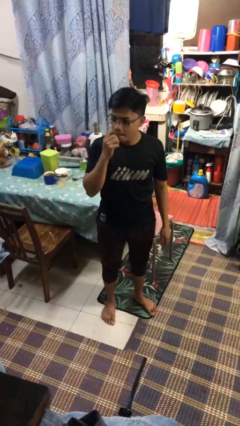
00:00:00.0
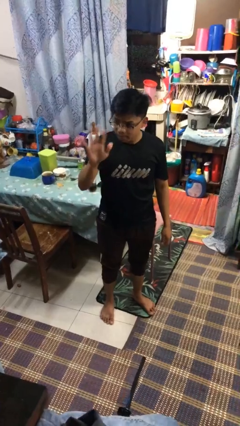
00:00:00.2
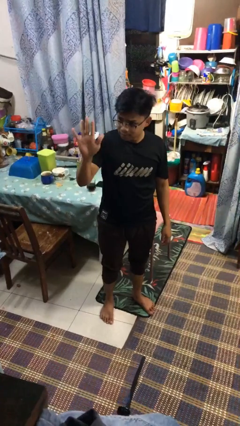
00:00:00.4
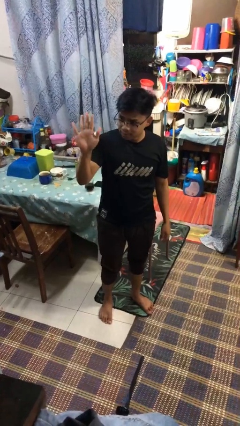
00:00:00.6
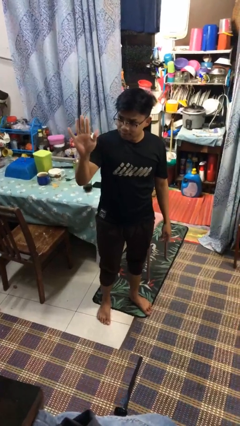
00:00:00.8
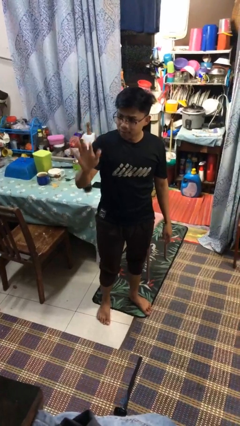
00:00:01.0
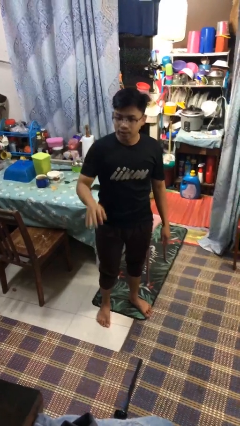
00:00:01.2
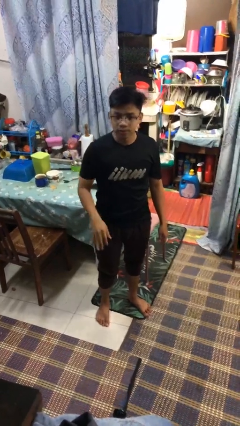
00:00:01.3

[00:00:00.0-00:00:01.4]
person gestures stop

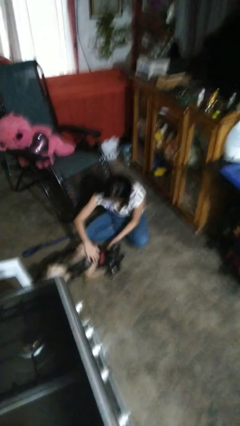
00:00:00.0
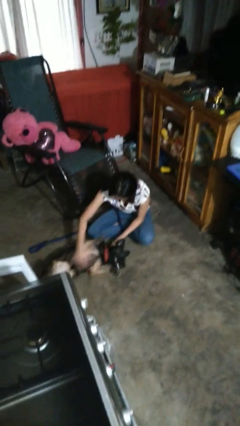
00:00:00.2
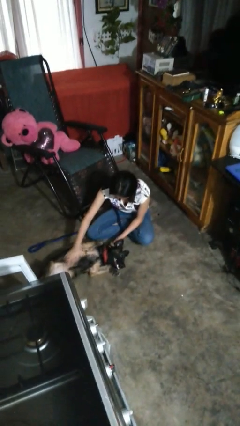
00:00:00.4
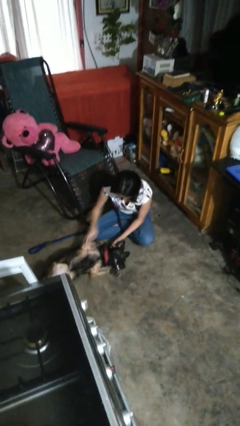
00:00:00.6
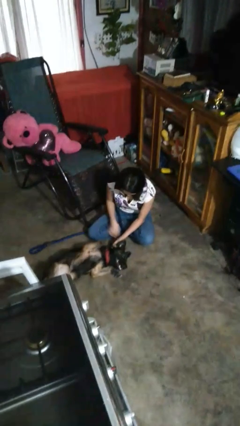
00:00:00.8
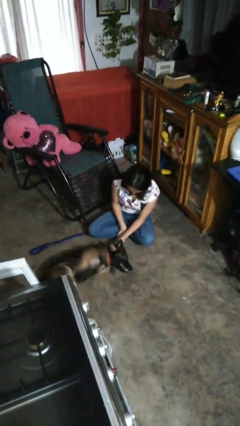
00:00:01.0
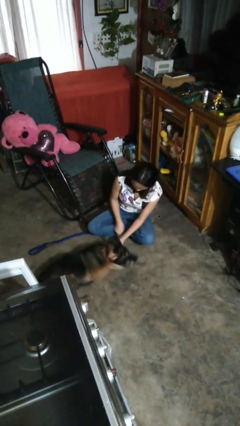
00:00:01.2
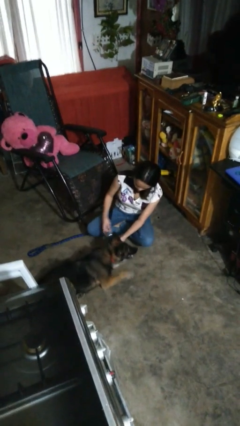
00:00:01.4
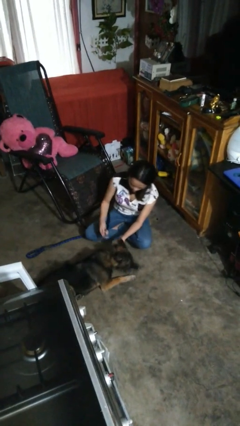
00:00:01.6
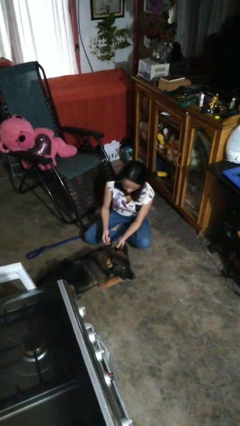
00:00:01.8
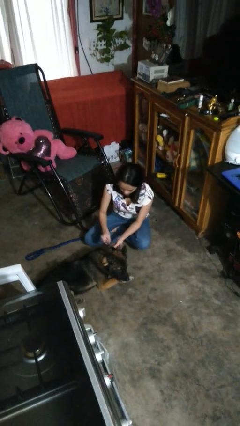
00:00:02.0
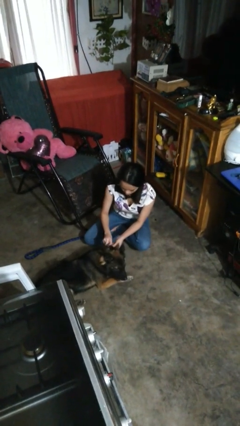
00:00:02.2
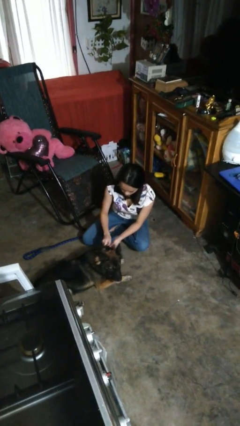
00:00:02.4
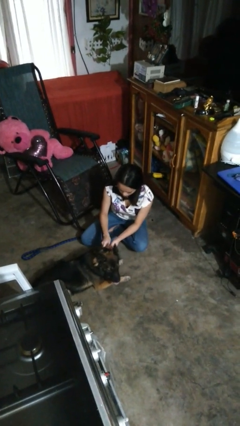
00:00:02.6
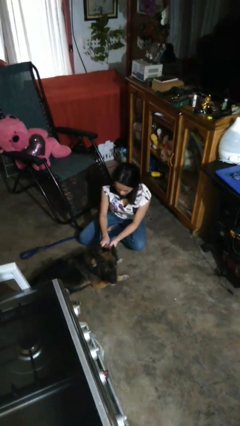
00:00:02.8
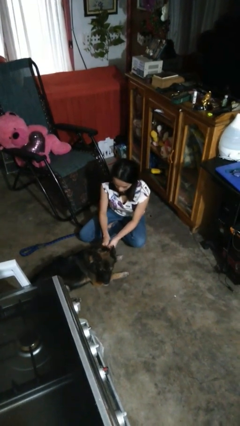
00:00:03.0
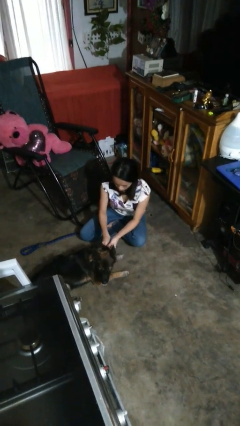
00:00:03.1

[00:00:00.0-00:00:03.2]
person attaches leash to dog

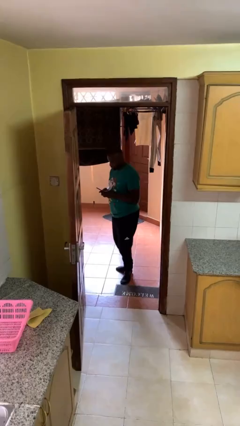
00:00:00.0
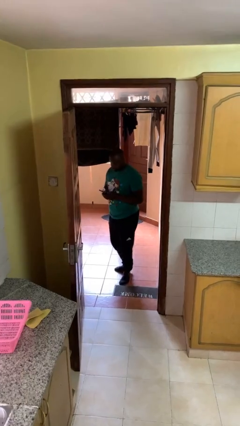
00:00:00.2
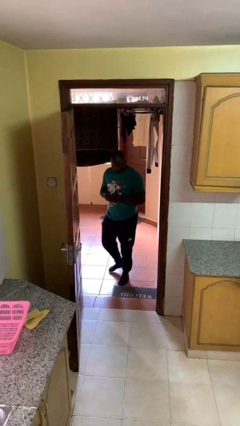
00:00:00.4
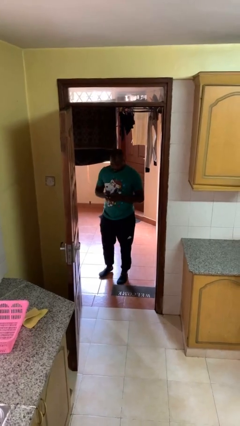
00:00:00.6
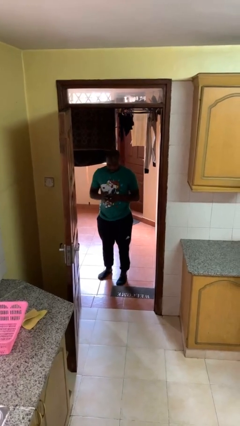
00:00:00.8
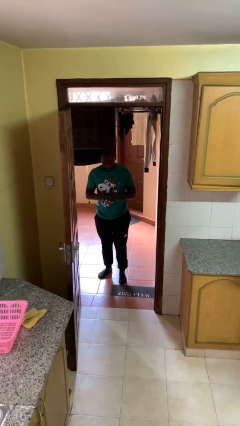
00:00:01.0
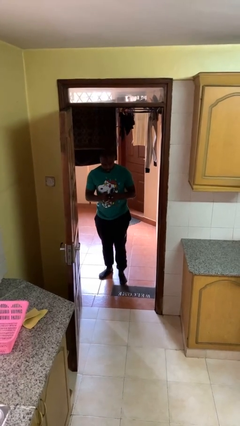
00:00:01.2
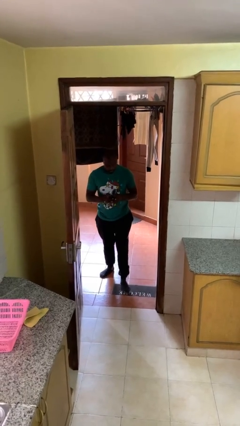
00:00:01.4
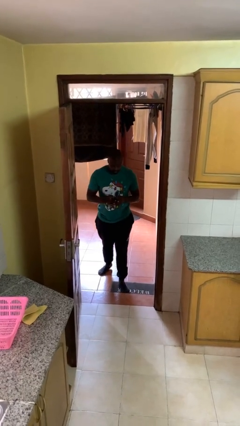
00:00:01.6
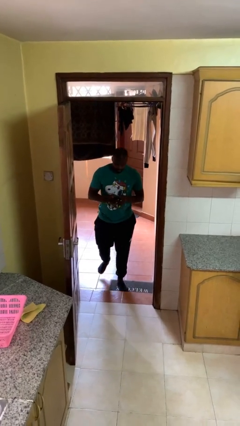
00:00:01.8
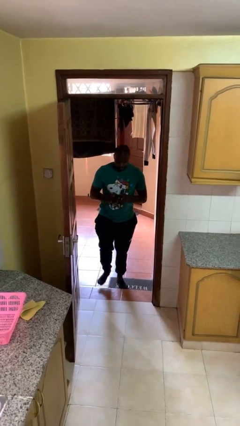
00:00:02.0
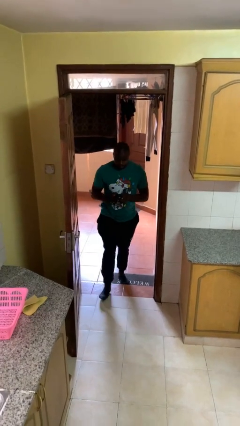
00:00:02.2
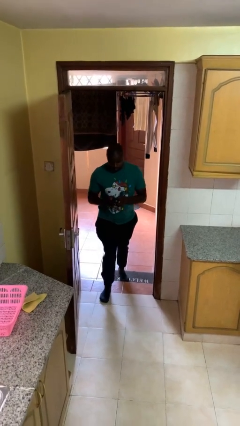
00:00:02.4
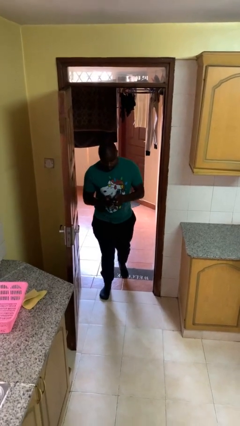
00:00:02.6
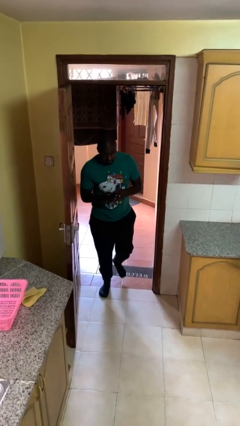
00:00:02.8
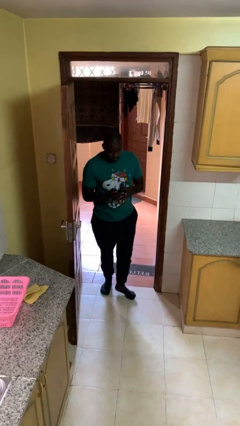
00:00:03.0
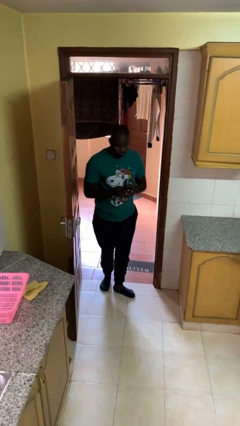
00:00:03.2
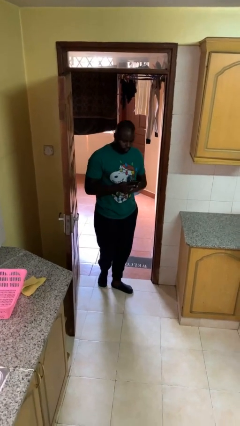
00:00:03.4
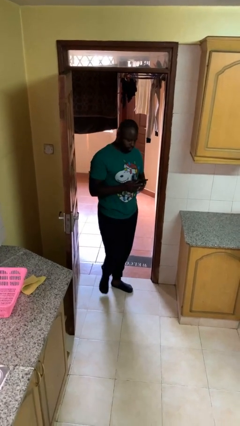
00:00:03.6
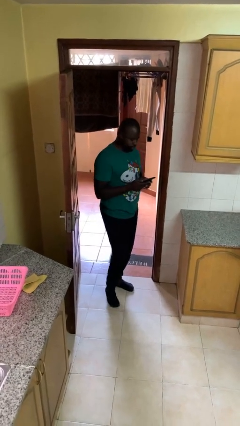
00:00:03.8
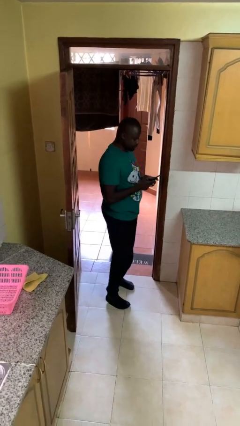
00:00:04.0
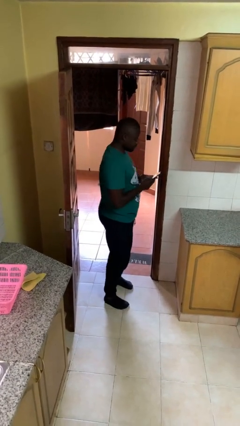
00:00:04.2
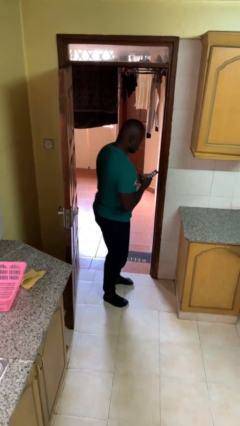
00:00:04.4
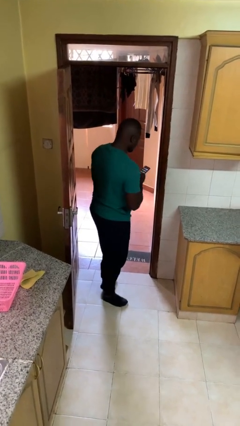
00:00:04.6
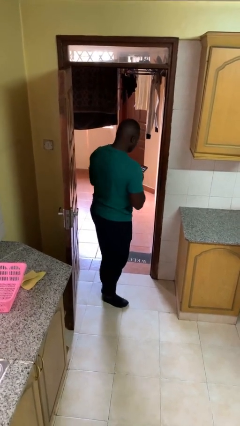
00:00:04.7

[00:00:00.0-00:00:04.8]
person enters scene through structure

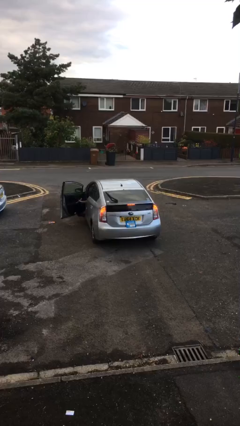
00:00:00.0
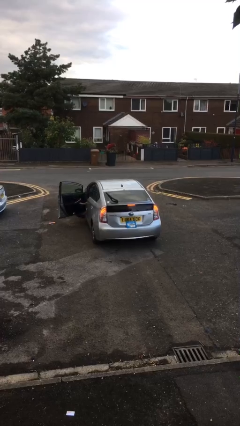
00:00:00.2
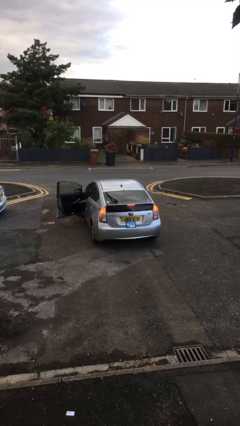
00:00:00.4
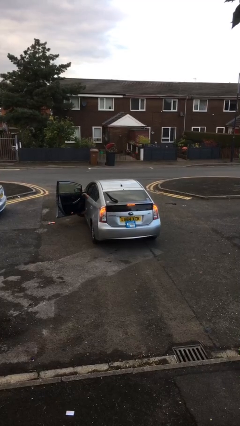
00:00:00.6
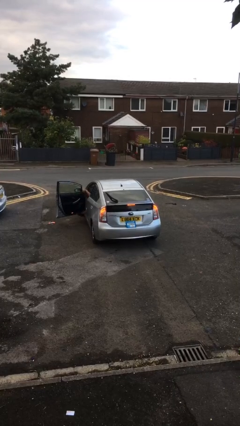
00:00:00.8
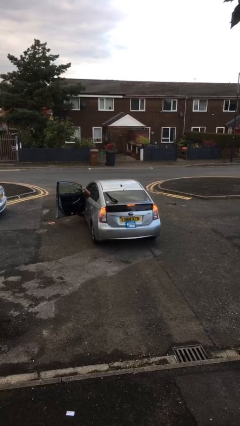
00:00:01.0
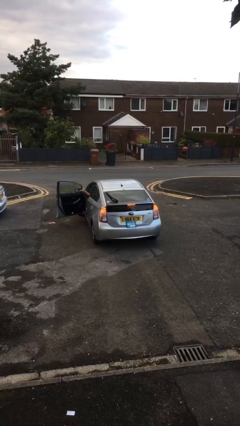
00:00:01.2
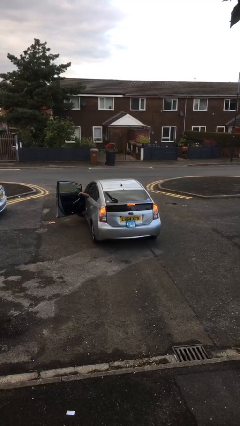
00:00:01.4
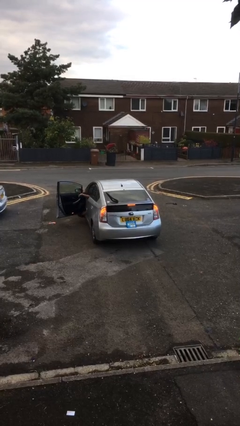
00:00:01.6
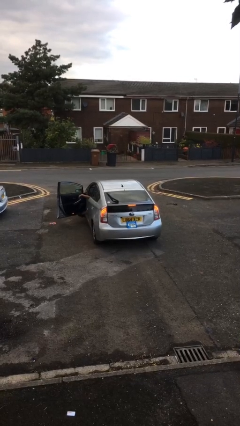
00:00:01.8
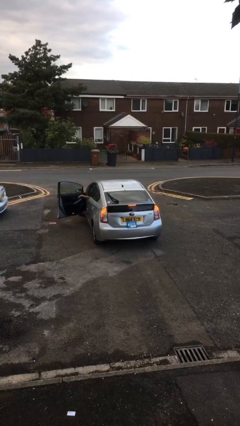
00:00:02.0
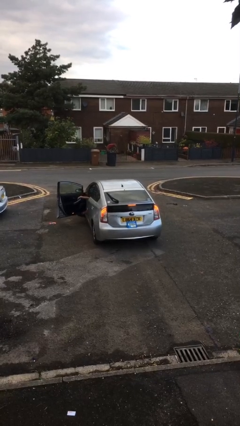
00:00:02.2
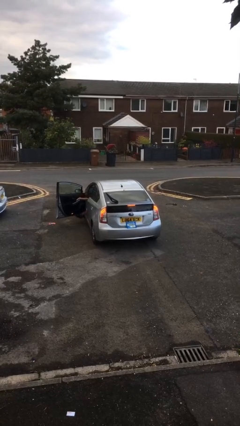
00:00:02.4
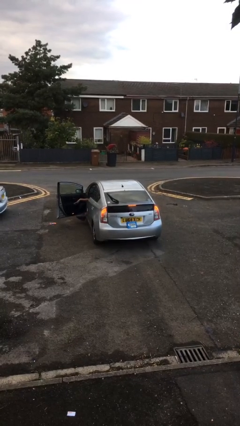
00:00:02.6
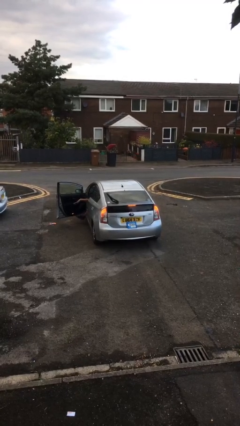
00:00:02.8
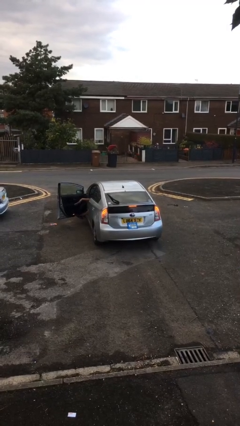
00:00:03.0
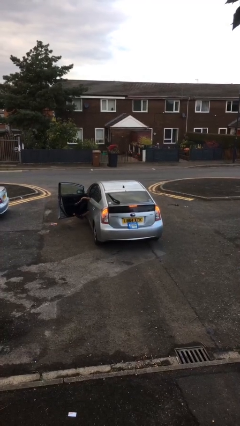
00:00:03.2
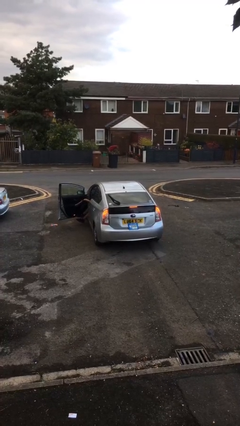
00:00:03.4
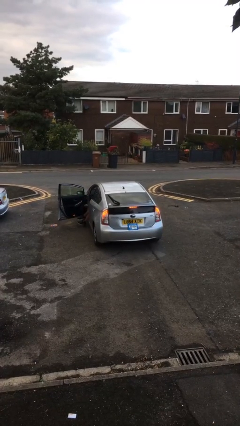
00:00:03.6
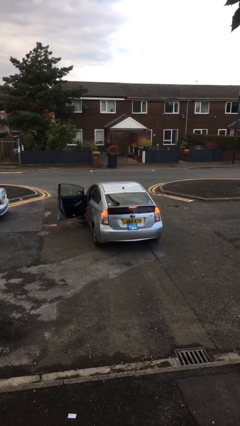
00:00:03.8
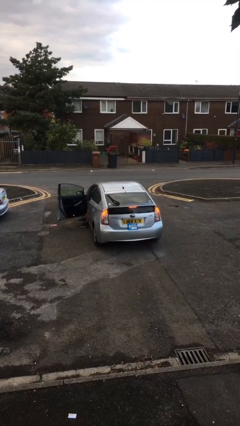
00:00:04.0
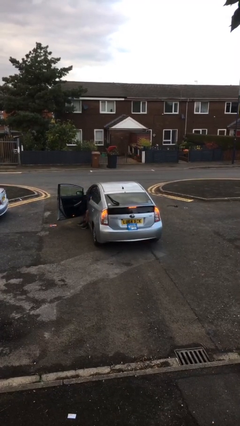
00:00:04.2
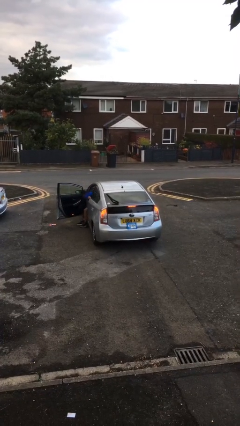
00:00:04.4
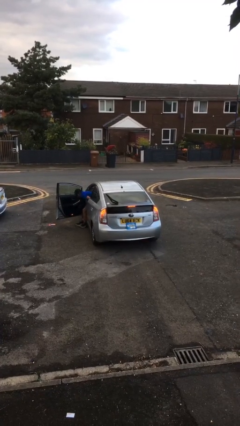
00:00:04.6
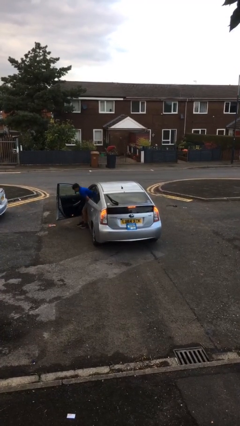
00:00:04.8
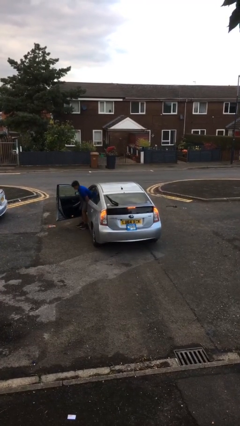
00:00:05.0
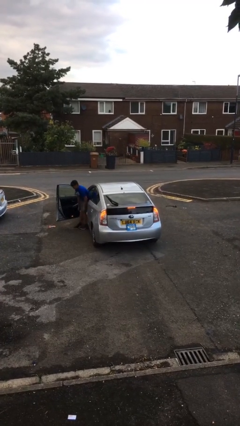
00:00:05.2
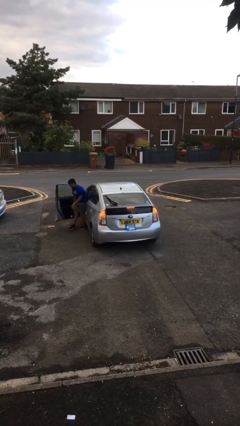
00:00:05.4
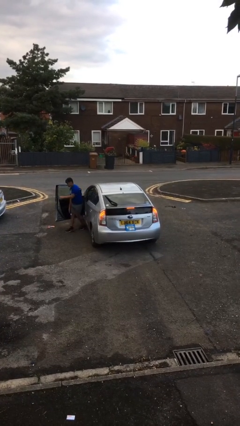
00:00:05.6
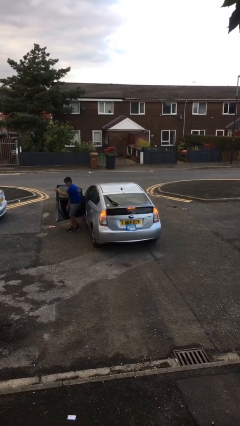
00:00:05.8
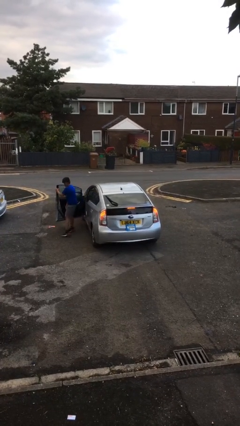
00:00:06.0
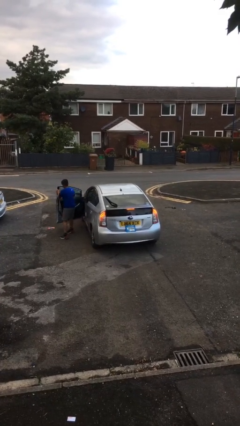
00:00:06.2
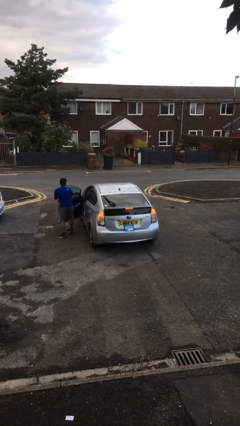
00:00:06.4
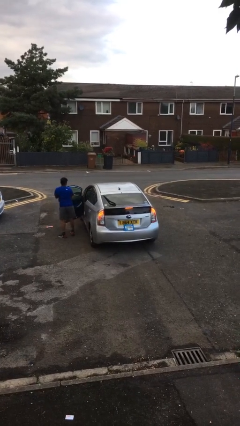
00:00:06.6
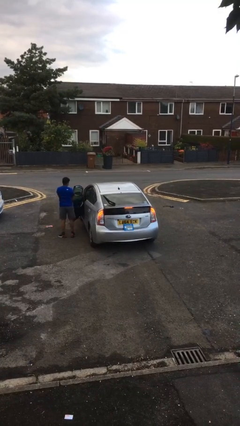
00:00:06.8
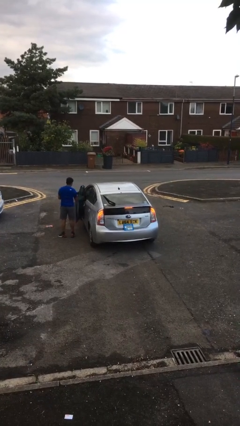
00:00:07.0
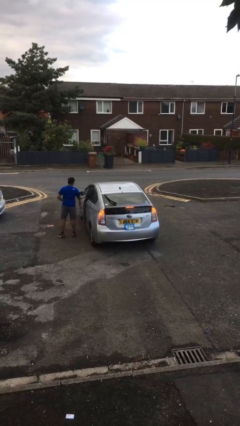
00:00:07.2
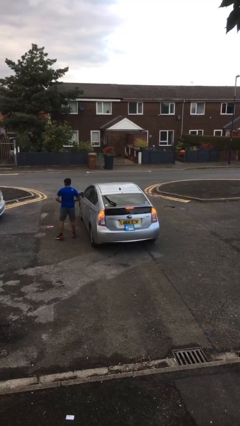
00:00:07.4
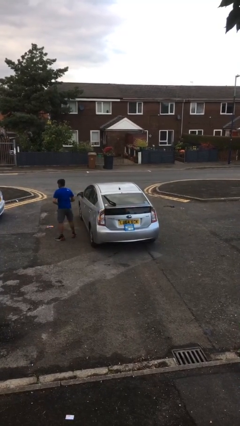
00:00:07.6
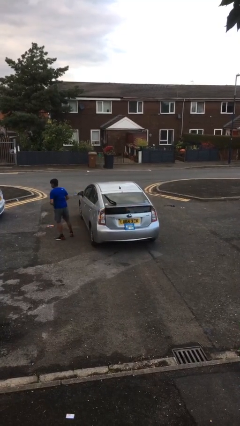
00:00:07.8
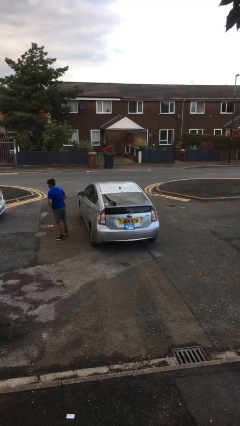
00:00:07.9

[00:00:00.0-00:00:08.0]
car drops off person

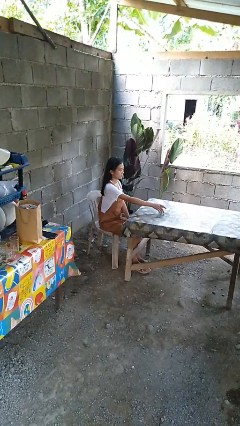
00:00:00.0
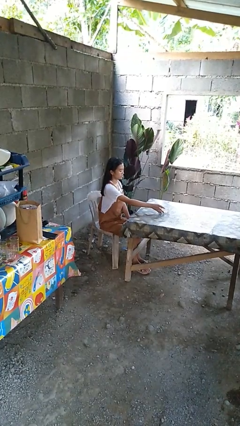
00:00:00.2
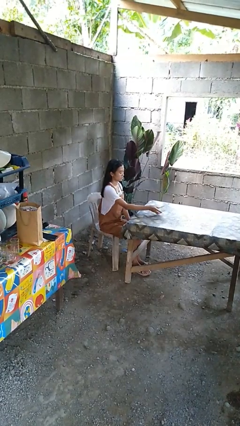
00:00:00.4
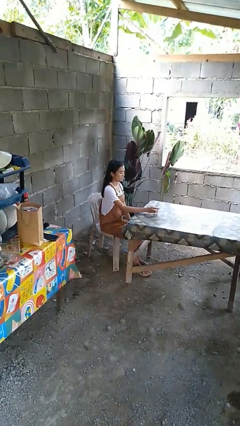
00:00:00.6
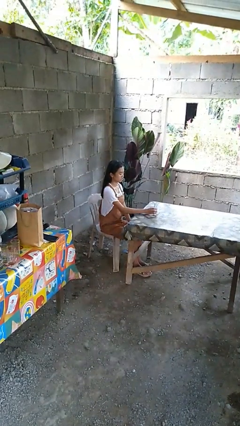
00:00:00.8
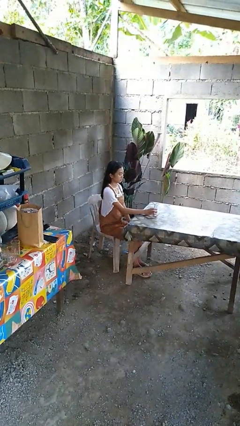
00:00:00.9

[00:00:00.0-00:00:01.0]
person sets upright glass
